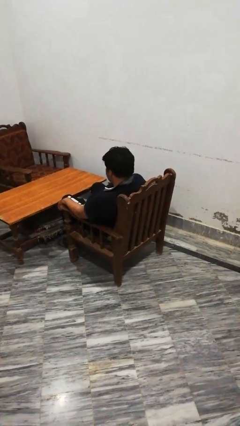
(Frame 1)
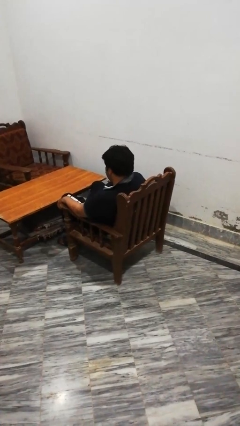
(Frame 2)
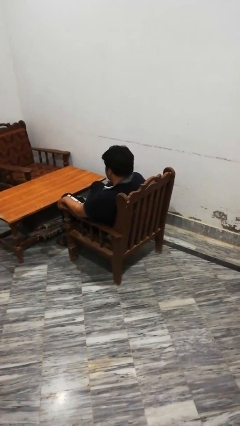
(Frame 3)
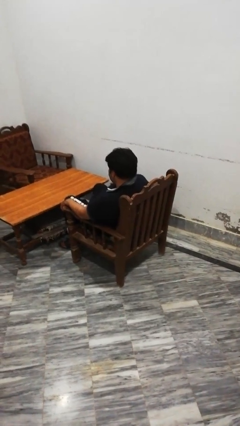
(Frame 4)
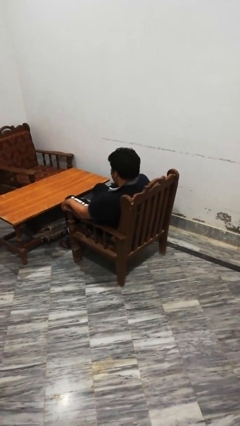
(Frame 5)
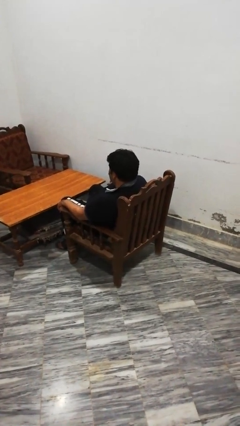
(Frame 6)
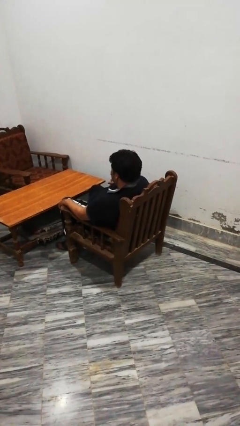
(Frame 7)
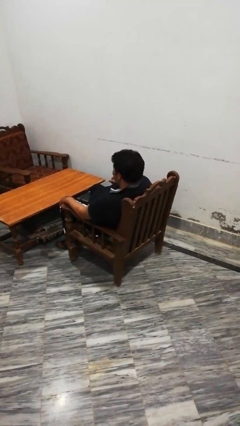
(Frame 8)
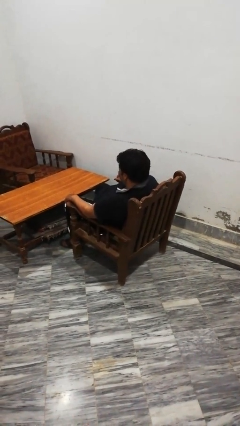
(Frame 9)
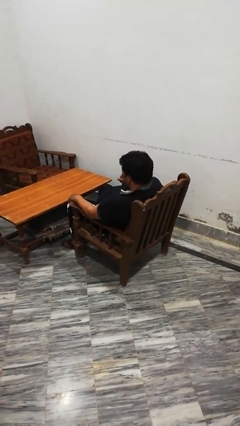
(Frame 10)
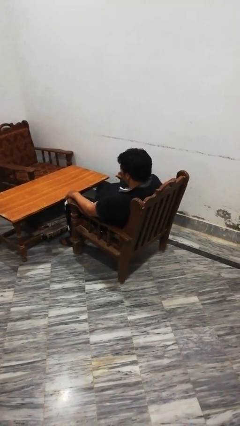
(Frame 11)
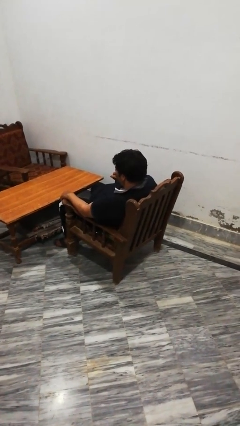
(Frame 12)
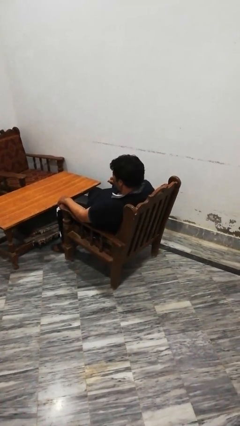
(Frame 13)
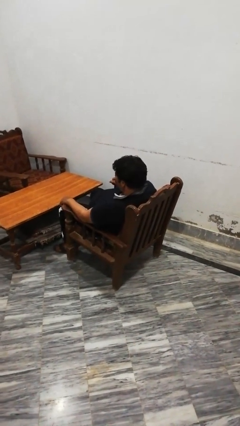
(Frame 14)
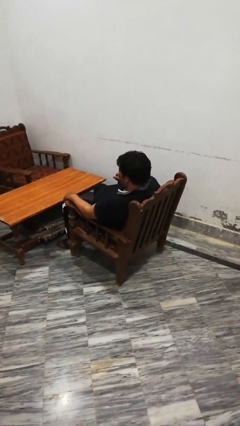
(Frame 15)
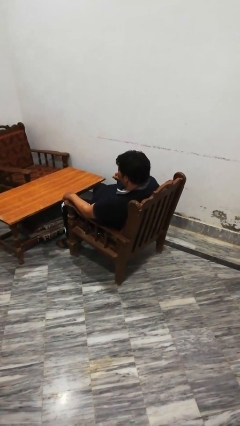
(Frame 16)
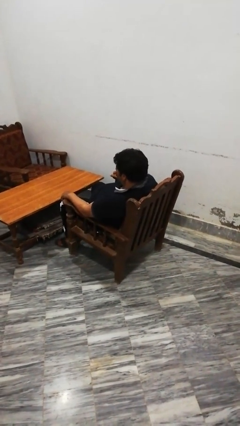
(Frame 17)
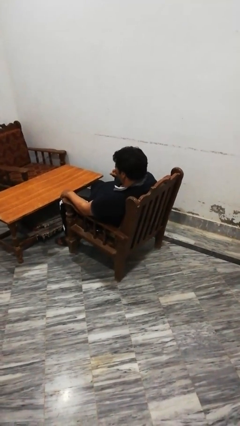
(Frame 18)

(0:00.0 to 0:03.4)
person pulls out chair

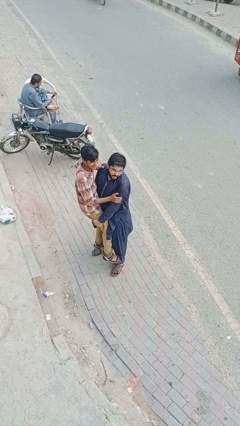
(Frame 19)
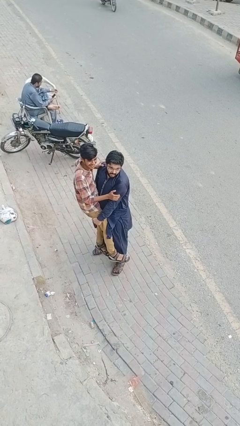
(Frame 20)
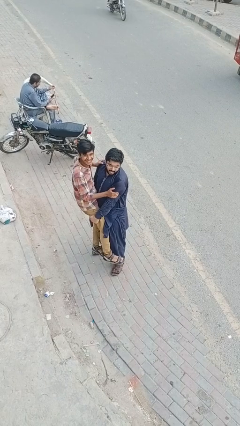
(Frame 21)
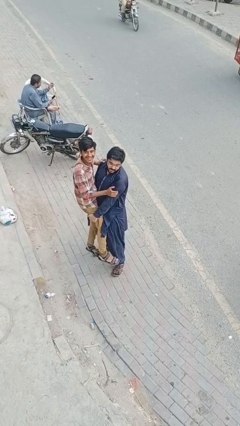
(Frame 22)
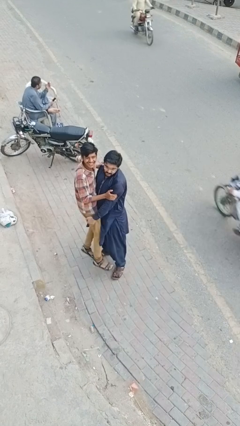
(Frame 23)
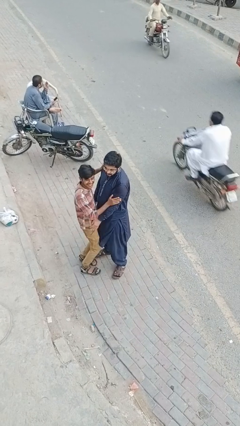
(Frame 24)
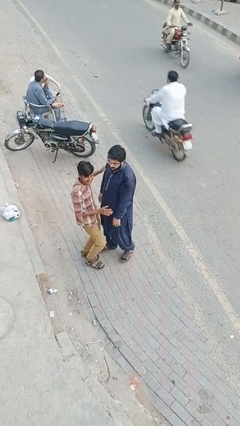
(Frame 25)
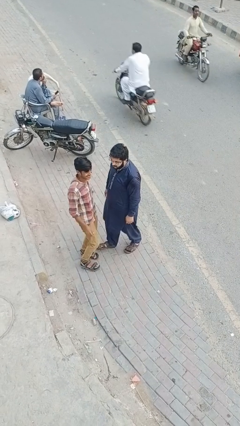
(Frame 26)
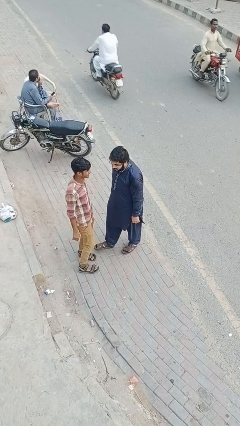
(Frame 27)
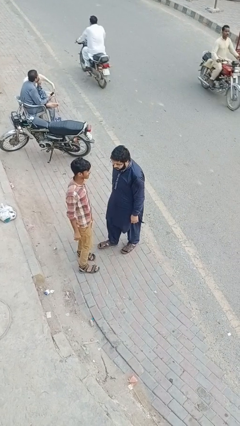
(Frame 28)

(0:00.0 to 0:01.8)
person puts down person

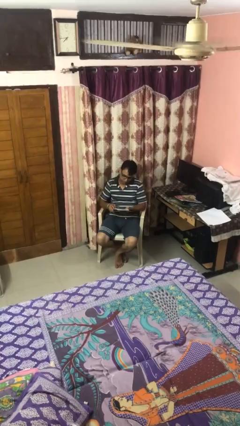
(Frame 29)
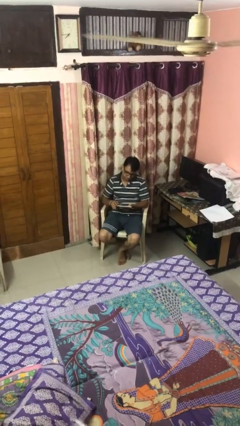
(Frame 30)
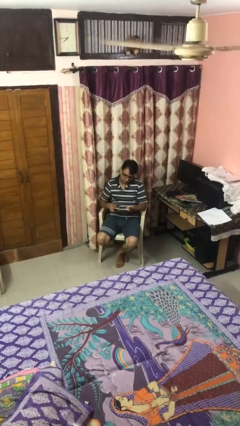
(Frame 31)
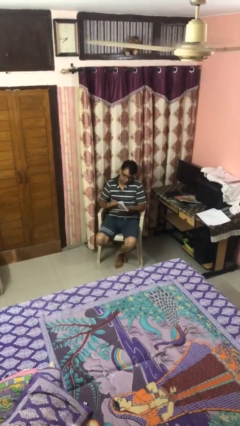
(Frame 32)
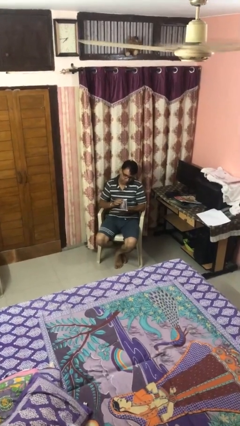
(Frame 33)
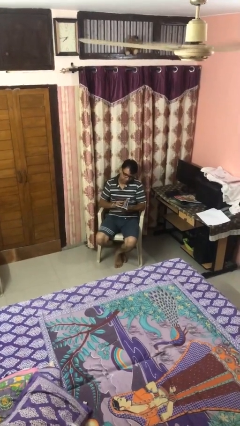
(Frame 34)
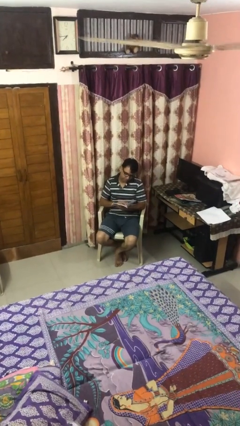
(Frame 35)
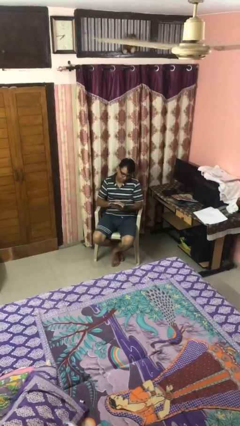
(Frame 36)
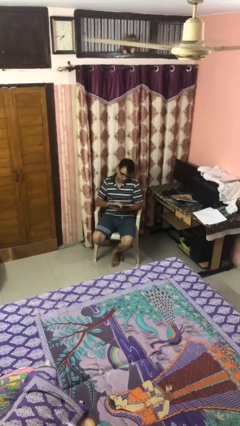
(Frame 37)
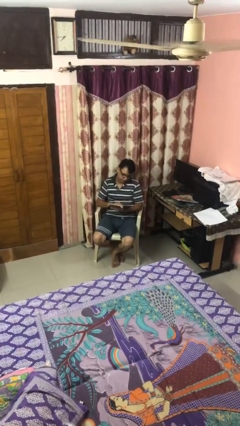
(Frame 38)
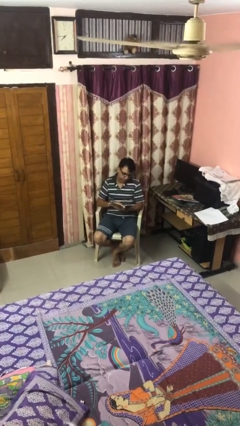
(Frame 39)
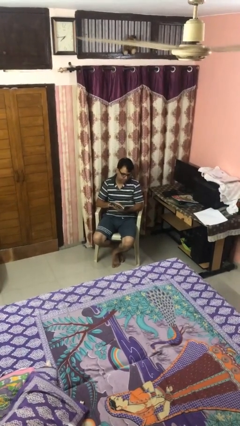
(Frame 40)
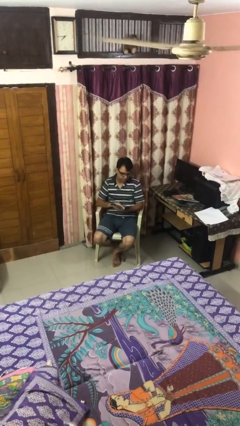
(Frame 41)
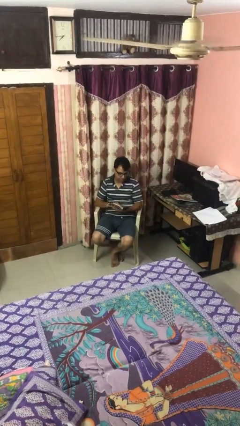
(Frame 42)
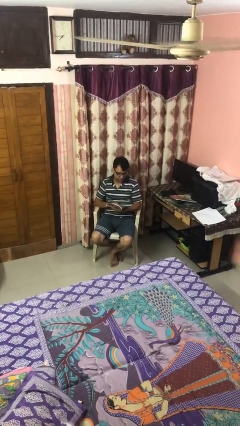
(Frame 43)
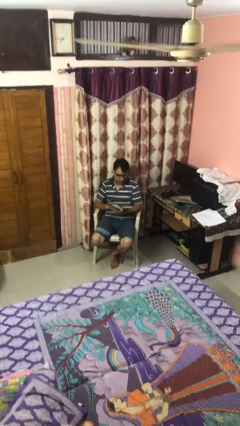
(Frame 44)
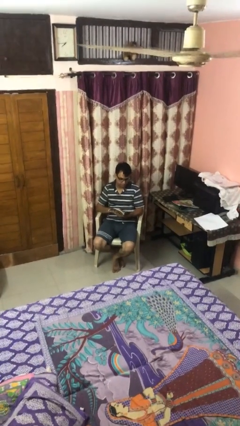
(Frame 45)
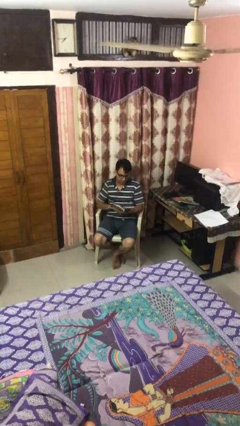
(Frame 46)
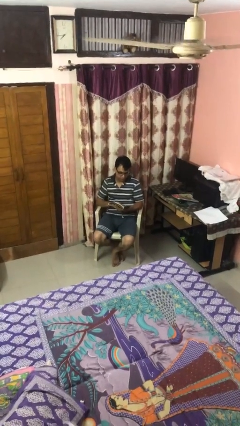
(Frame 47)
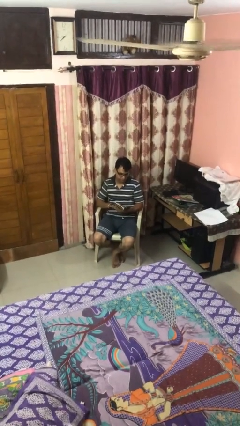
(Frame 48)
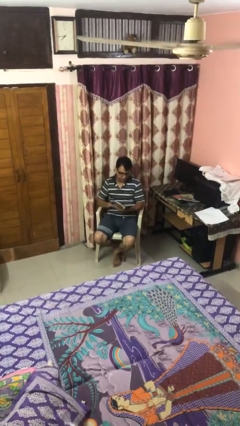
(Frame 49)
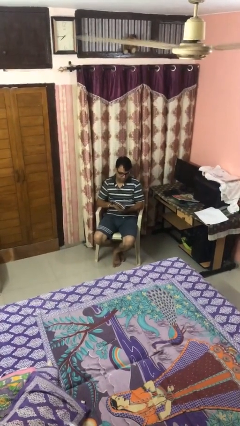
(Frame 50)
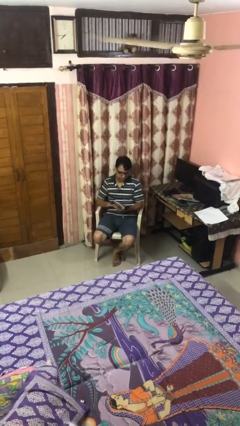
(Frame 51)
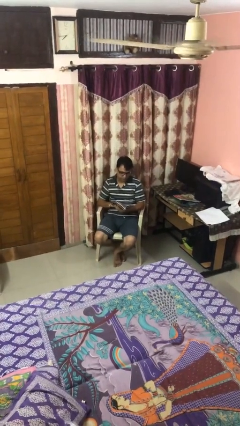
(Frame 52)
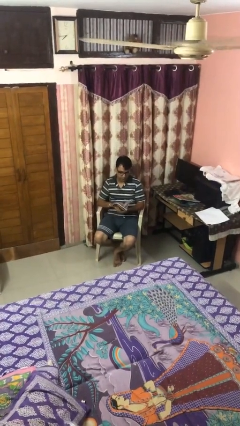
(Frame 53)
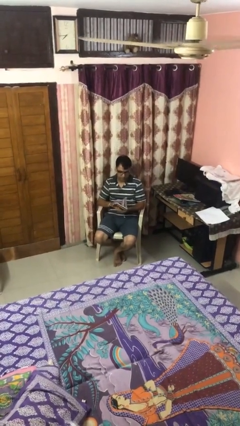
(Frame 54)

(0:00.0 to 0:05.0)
person reads book

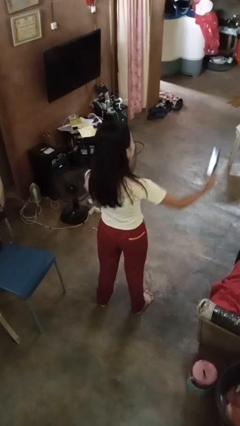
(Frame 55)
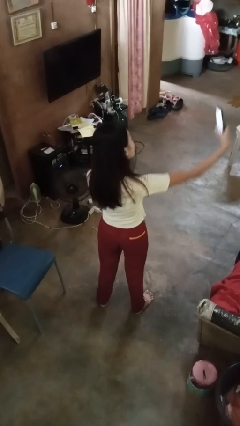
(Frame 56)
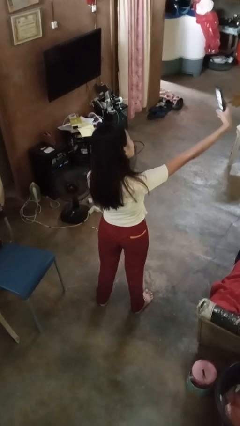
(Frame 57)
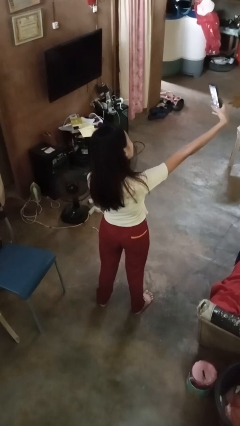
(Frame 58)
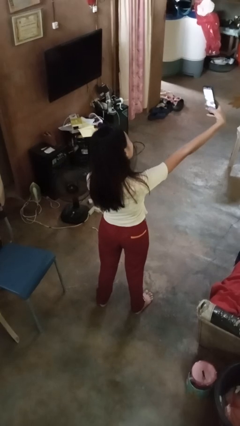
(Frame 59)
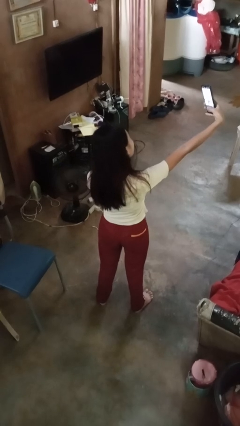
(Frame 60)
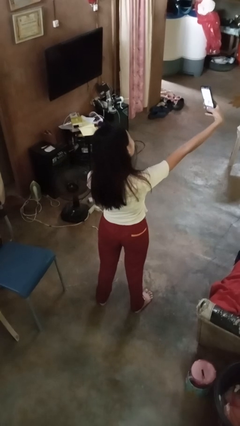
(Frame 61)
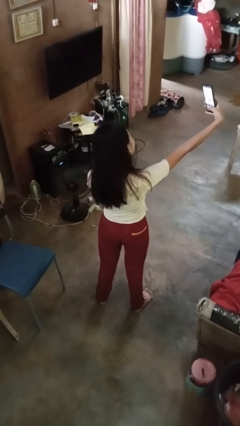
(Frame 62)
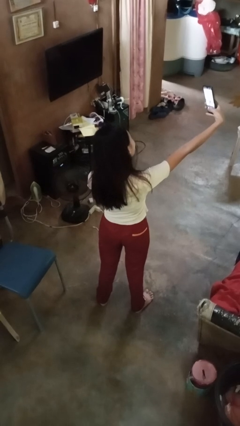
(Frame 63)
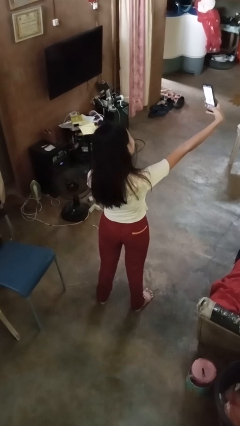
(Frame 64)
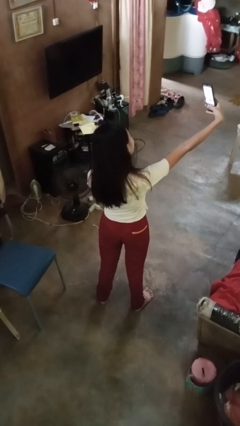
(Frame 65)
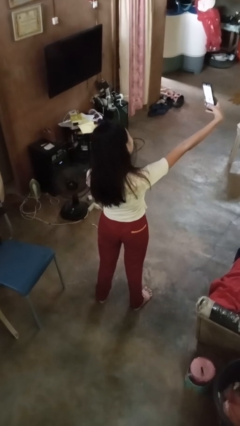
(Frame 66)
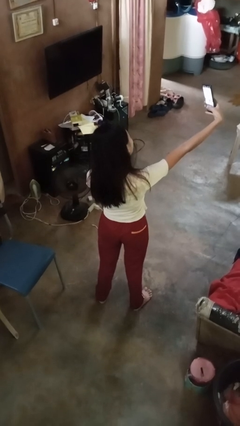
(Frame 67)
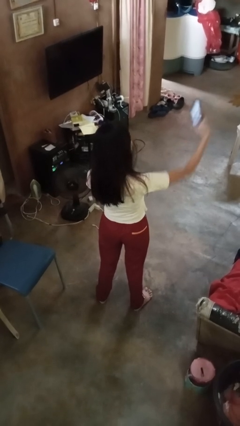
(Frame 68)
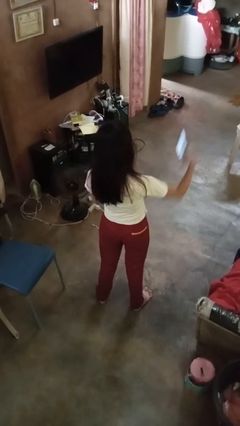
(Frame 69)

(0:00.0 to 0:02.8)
person takes selfie

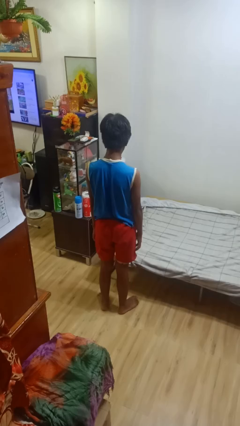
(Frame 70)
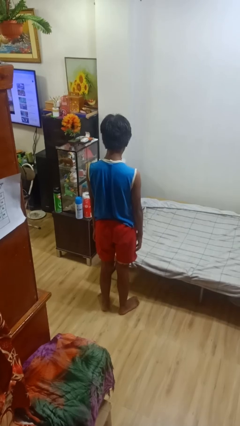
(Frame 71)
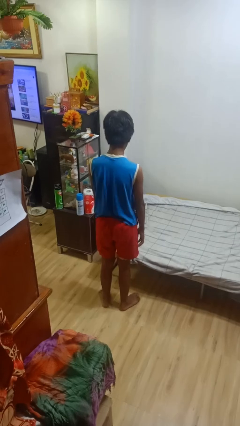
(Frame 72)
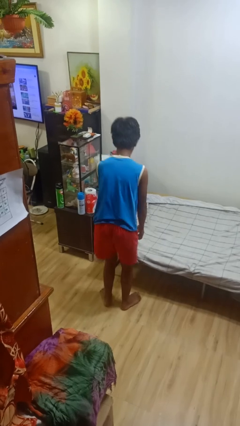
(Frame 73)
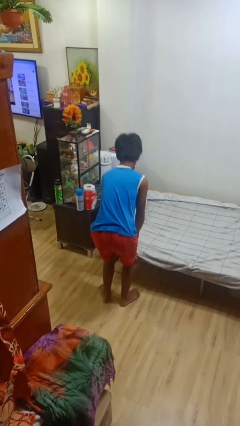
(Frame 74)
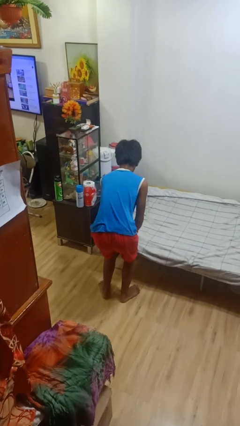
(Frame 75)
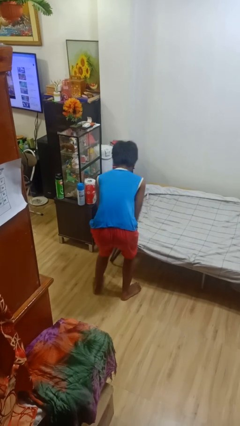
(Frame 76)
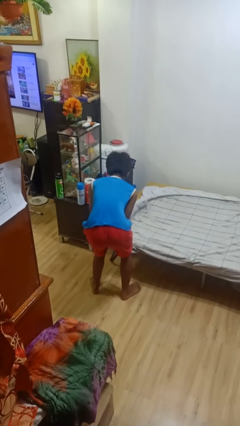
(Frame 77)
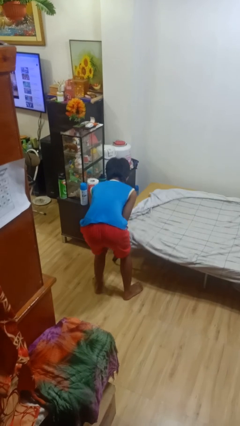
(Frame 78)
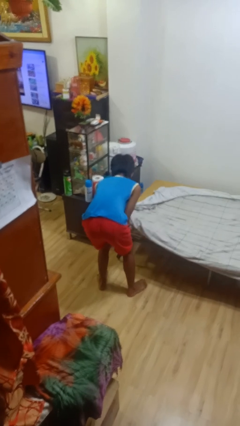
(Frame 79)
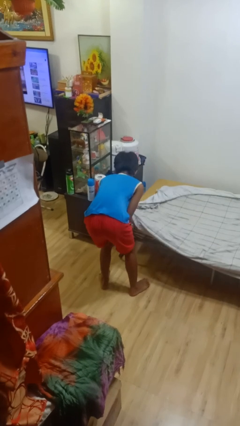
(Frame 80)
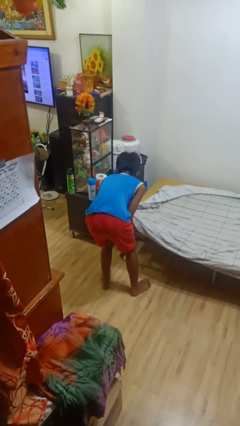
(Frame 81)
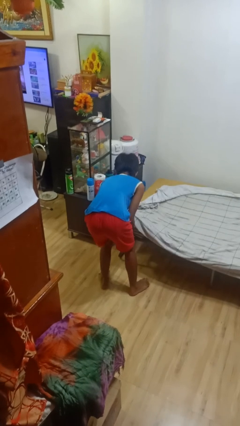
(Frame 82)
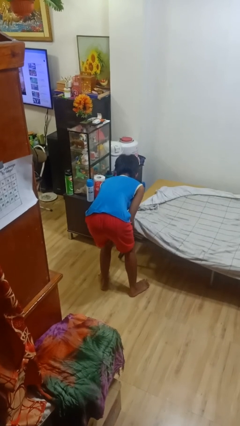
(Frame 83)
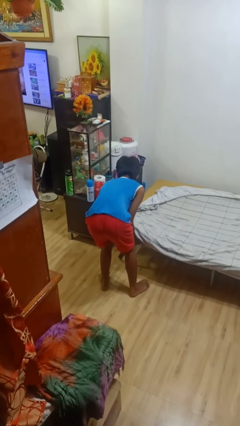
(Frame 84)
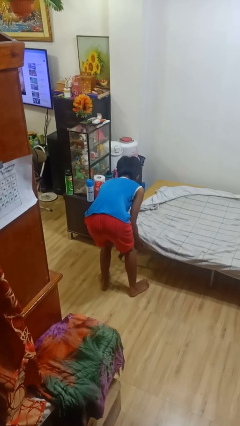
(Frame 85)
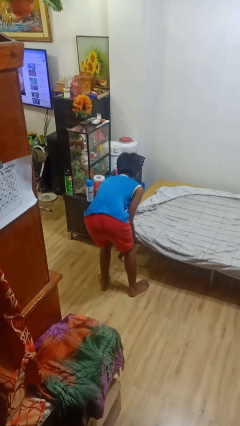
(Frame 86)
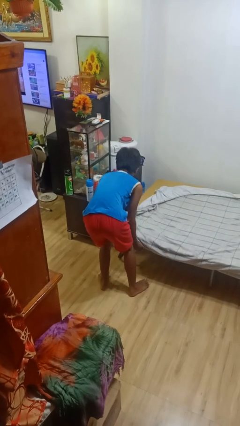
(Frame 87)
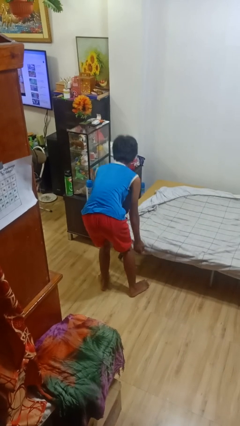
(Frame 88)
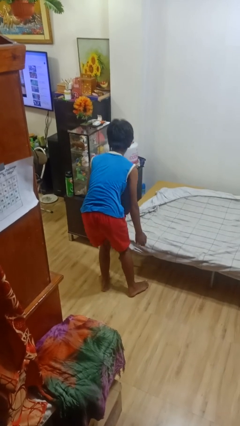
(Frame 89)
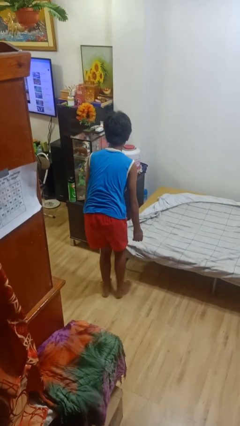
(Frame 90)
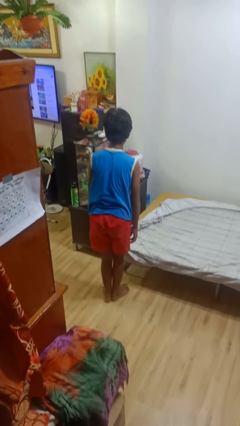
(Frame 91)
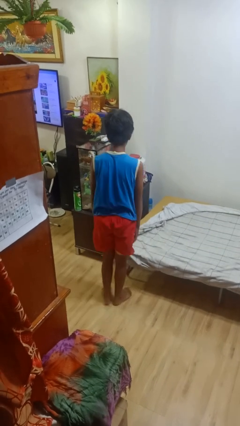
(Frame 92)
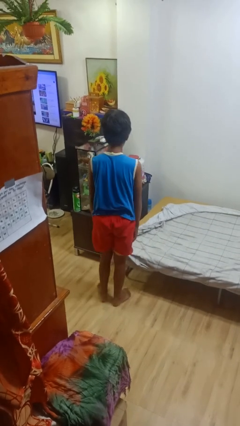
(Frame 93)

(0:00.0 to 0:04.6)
person makes bed
